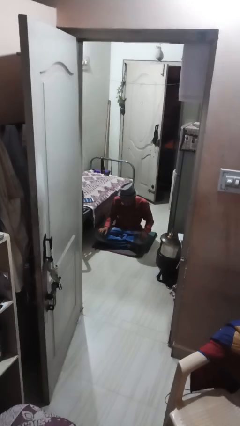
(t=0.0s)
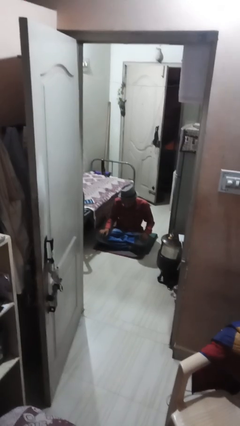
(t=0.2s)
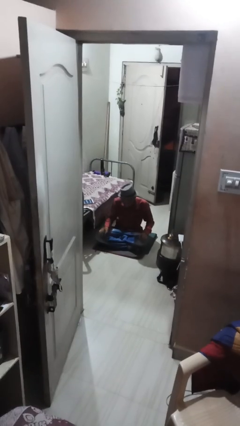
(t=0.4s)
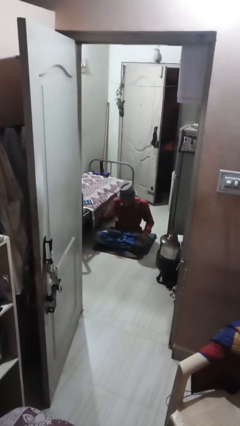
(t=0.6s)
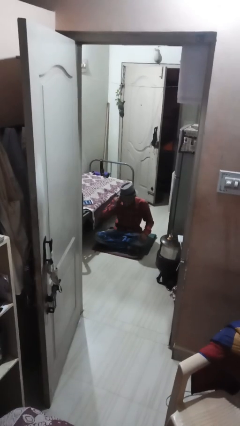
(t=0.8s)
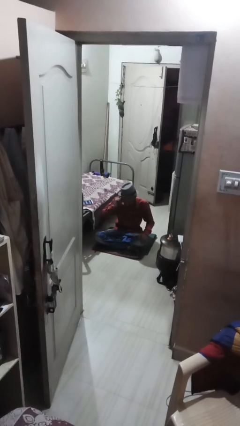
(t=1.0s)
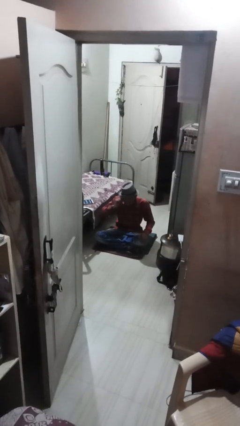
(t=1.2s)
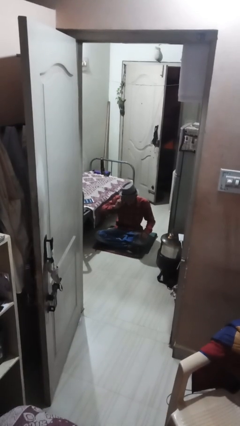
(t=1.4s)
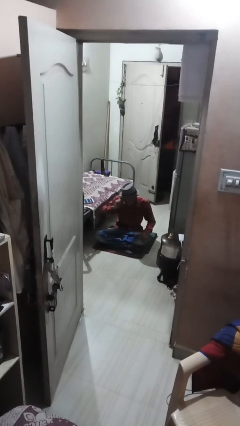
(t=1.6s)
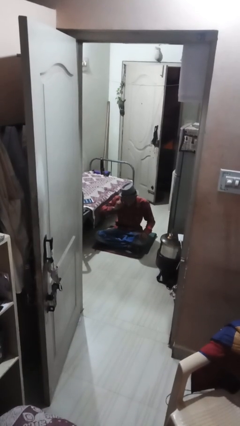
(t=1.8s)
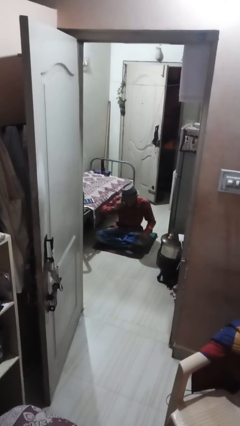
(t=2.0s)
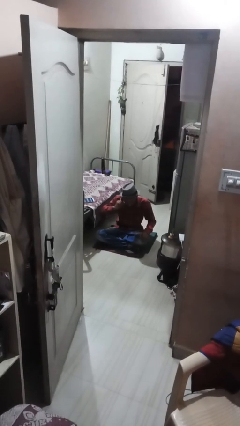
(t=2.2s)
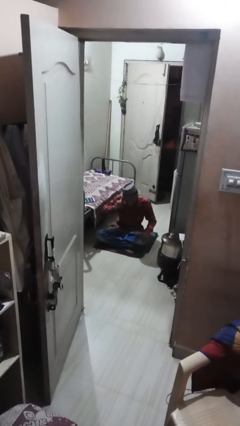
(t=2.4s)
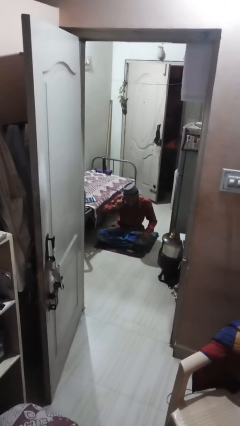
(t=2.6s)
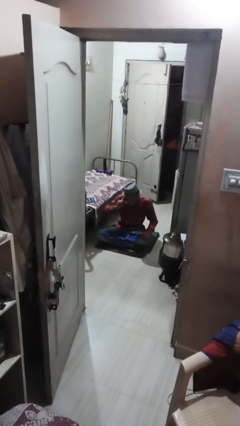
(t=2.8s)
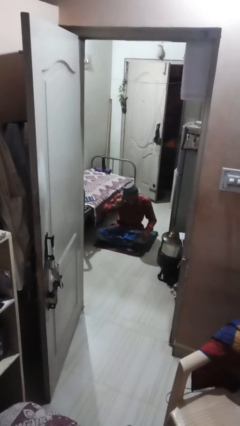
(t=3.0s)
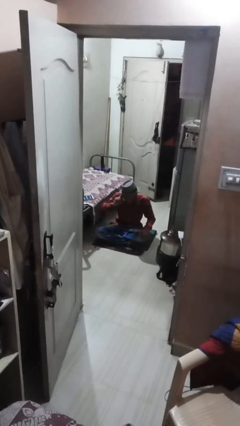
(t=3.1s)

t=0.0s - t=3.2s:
person touches earlobe

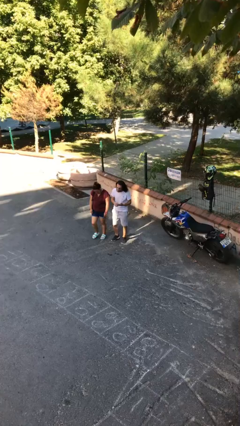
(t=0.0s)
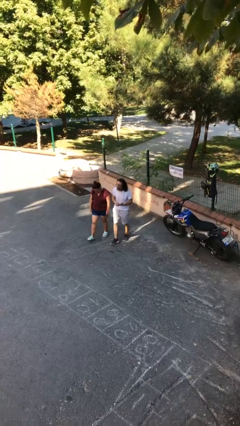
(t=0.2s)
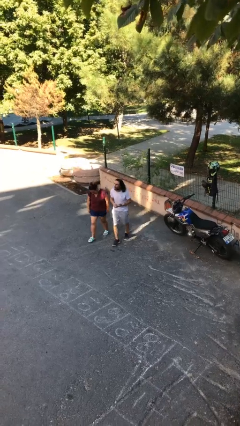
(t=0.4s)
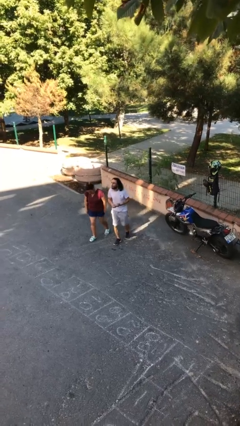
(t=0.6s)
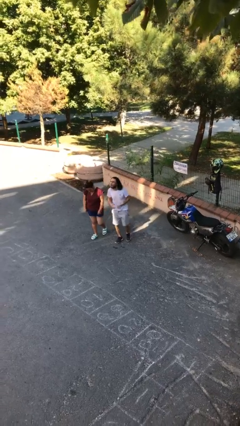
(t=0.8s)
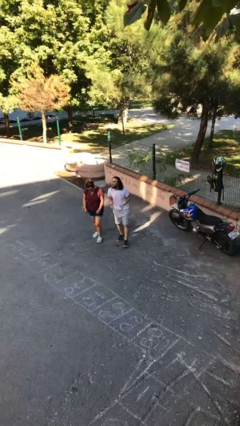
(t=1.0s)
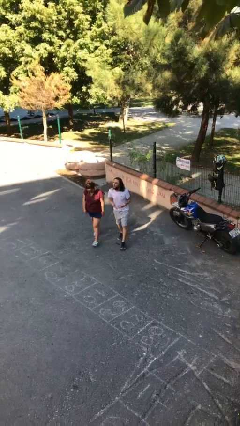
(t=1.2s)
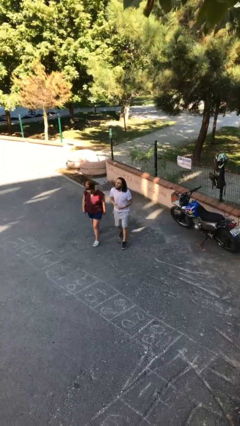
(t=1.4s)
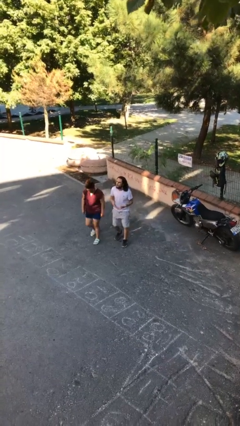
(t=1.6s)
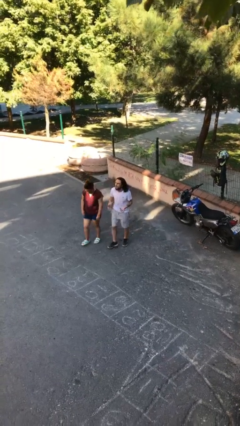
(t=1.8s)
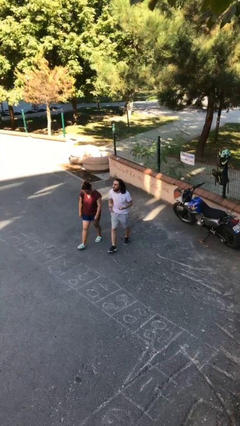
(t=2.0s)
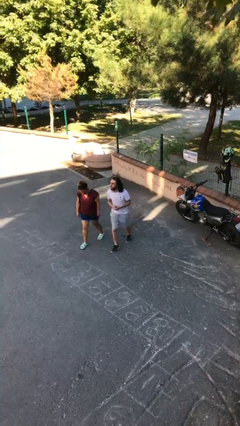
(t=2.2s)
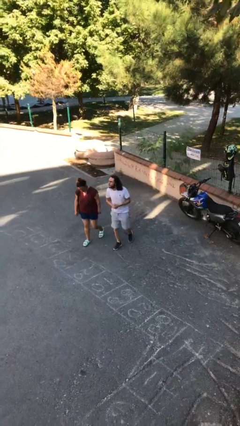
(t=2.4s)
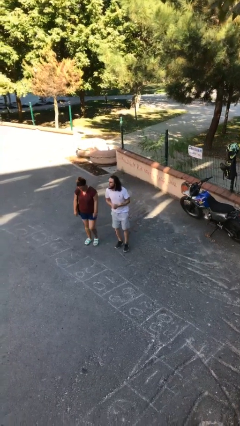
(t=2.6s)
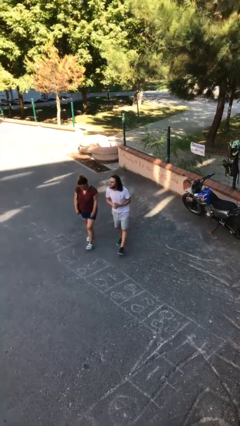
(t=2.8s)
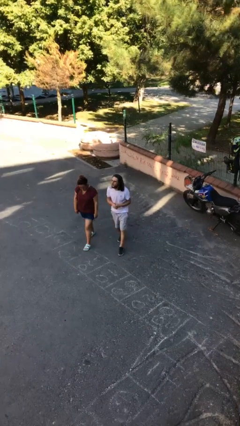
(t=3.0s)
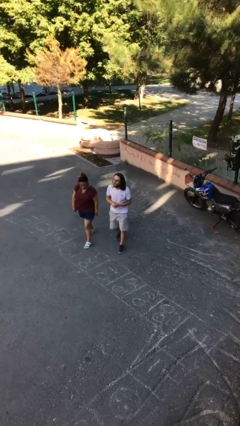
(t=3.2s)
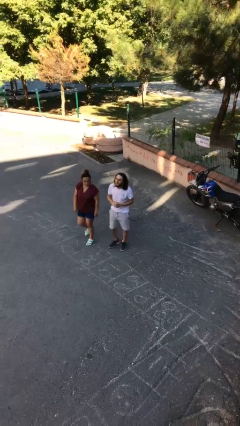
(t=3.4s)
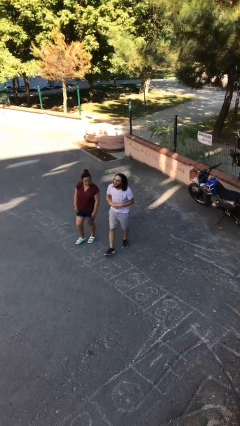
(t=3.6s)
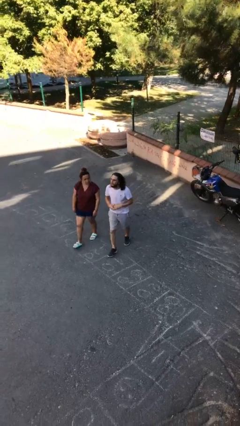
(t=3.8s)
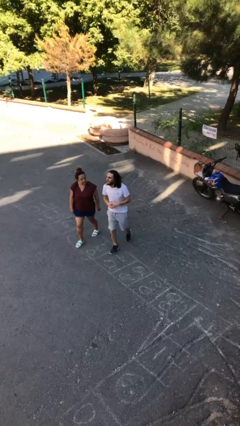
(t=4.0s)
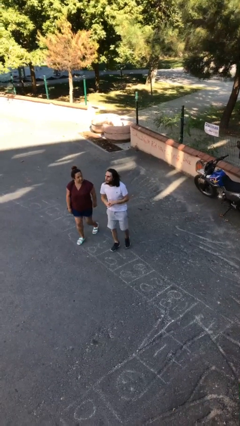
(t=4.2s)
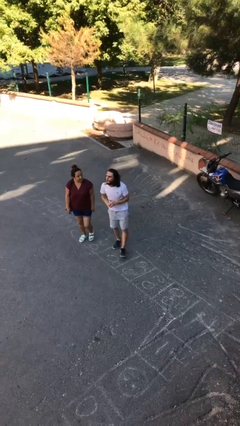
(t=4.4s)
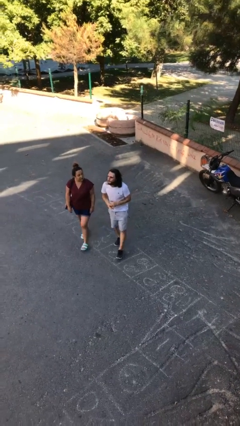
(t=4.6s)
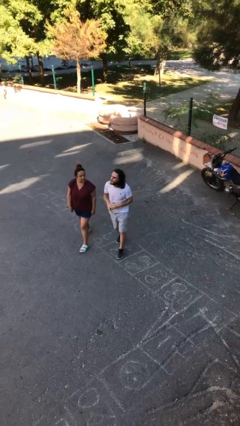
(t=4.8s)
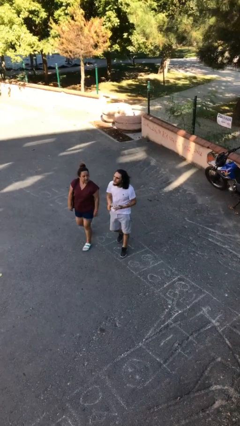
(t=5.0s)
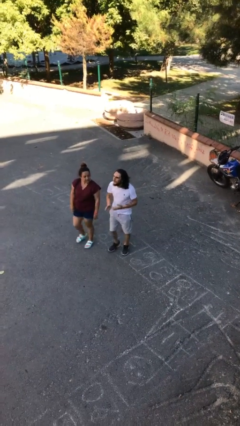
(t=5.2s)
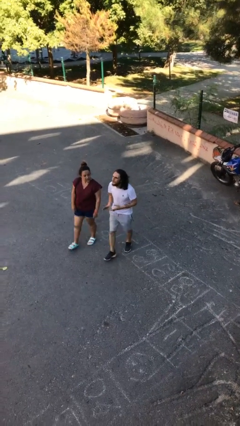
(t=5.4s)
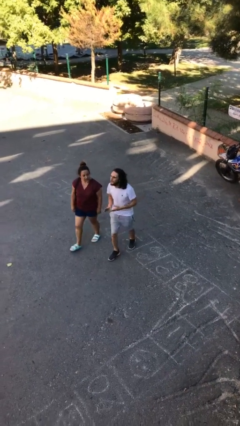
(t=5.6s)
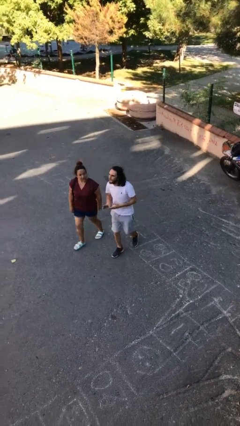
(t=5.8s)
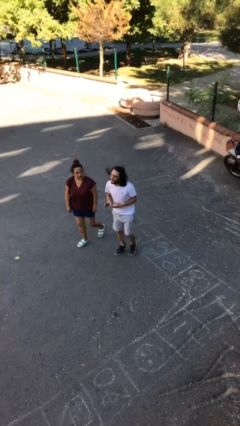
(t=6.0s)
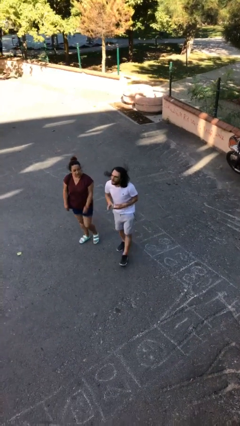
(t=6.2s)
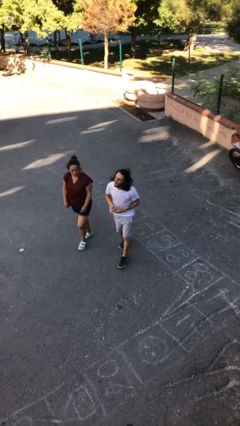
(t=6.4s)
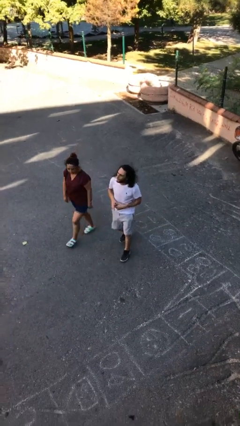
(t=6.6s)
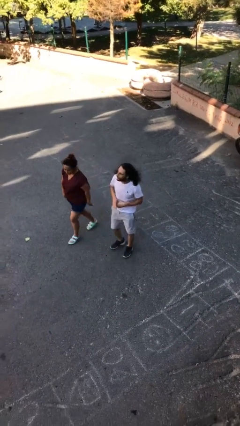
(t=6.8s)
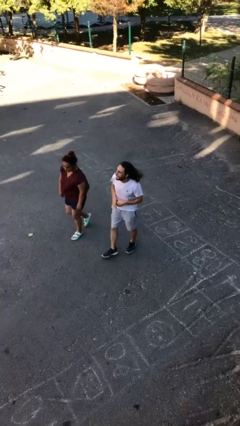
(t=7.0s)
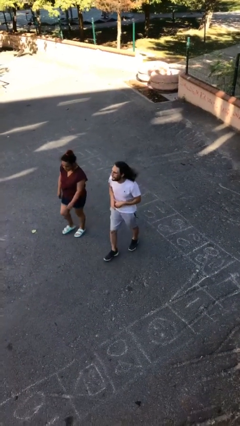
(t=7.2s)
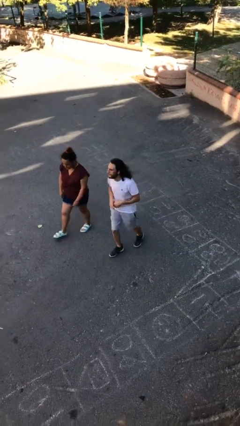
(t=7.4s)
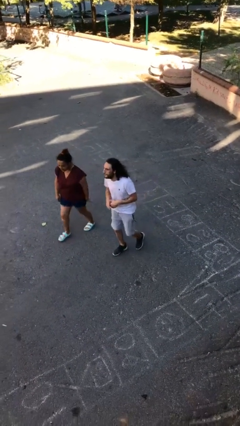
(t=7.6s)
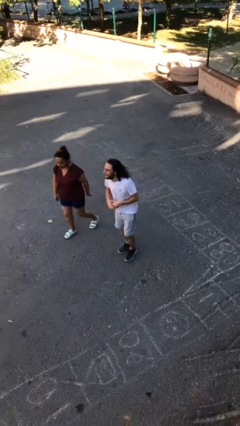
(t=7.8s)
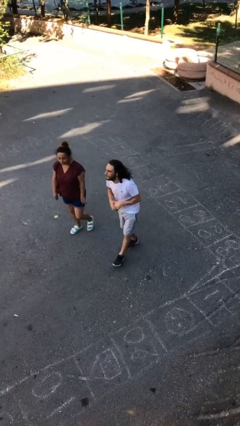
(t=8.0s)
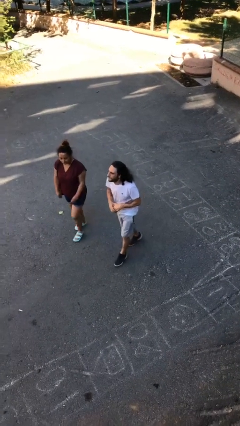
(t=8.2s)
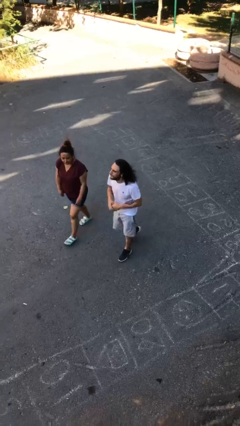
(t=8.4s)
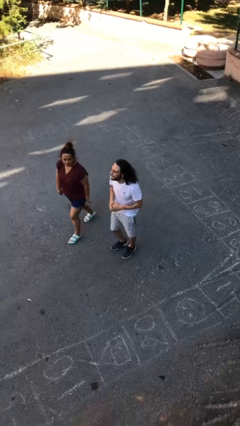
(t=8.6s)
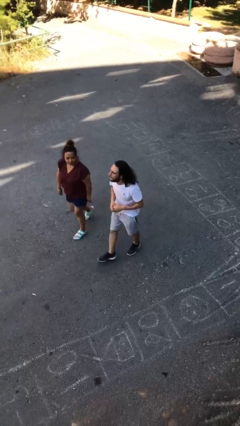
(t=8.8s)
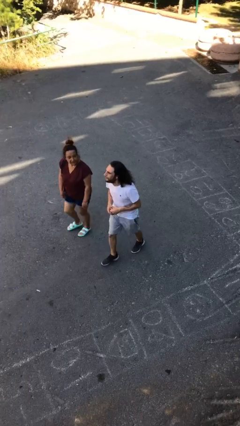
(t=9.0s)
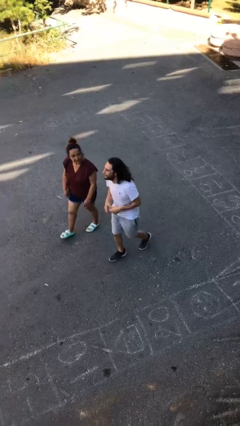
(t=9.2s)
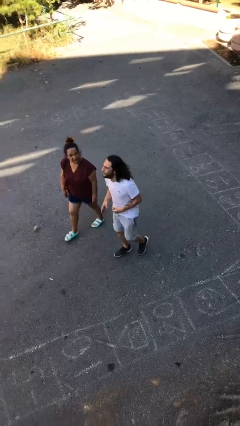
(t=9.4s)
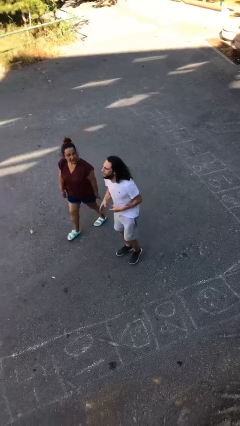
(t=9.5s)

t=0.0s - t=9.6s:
person talks to person

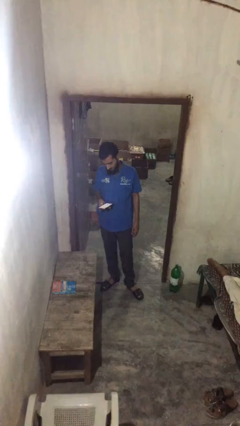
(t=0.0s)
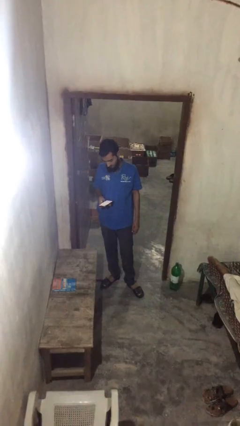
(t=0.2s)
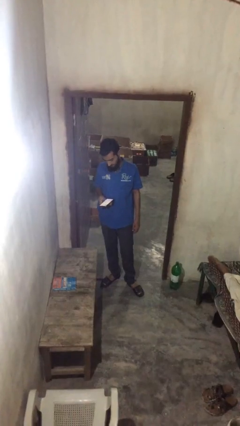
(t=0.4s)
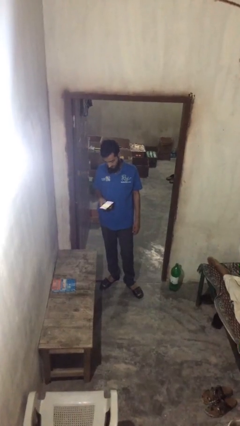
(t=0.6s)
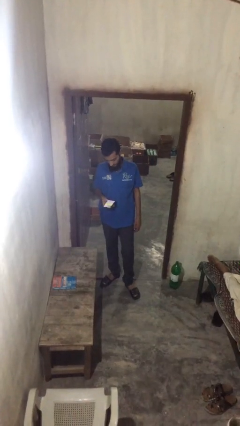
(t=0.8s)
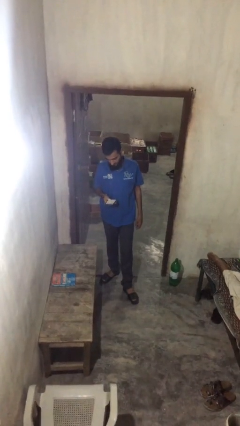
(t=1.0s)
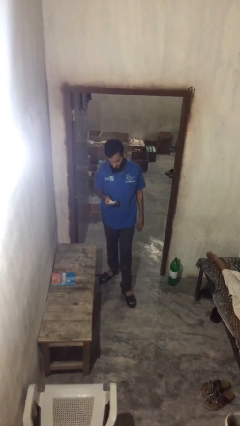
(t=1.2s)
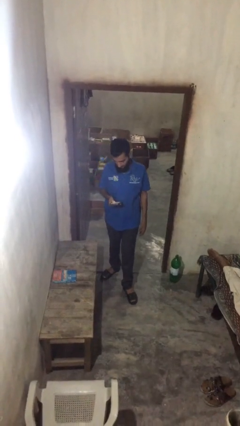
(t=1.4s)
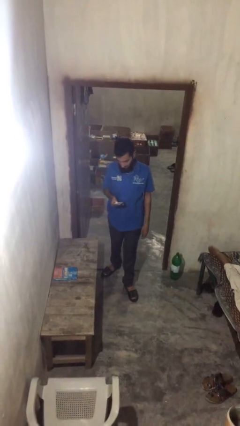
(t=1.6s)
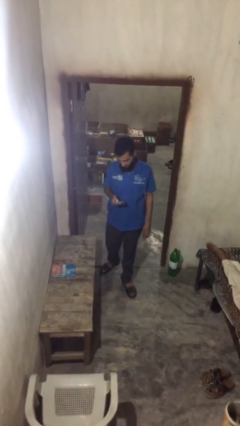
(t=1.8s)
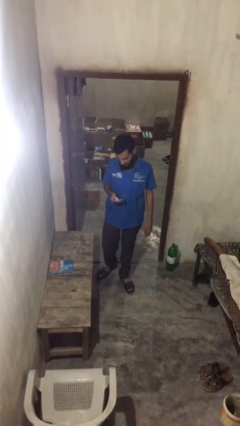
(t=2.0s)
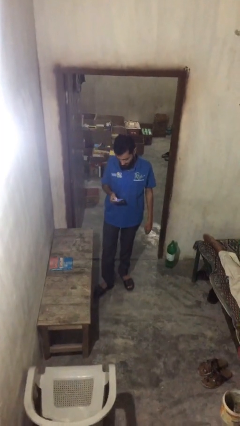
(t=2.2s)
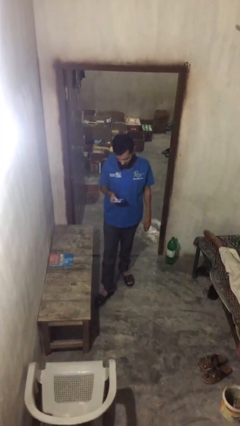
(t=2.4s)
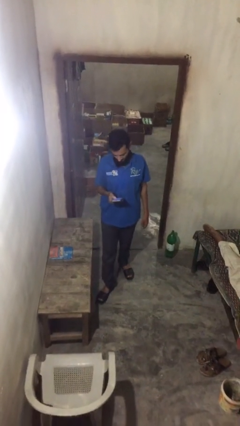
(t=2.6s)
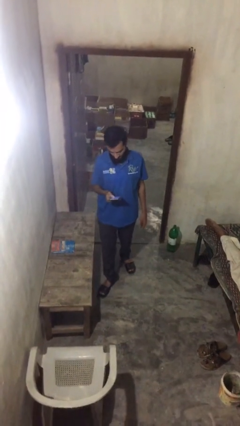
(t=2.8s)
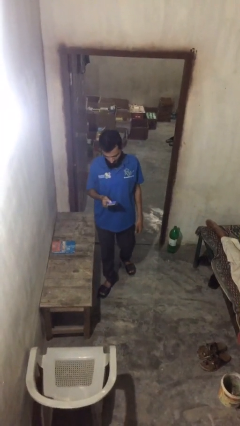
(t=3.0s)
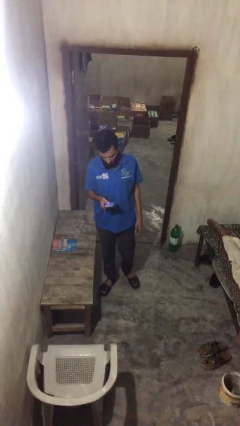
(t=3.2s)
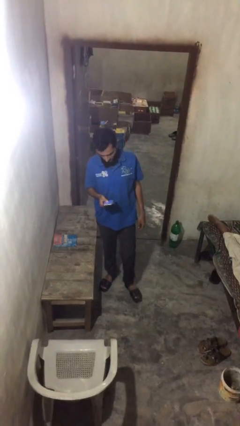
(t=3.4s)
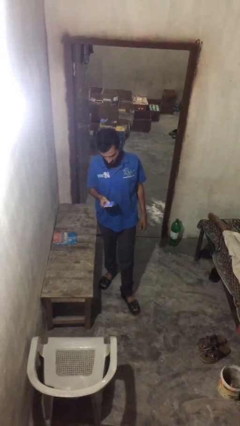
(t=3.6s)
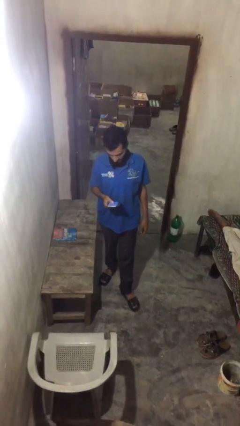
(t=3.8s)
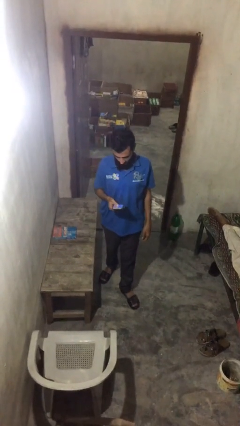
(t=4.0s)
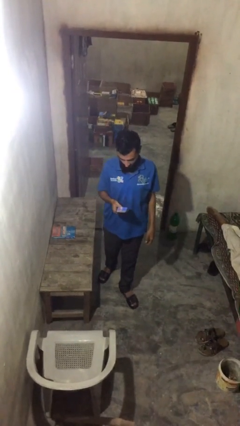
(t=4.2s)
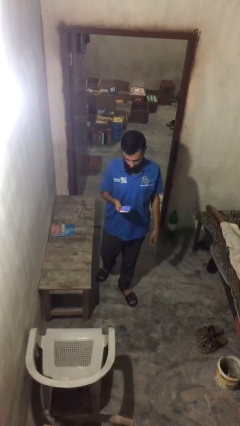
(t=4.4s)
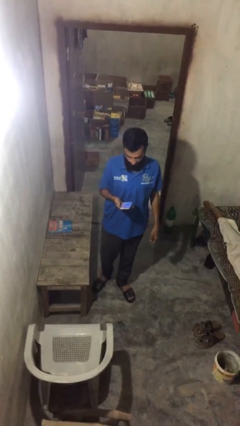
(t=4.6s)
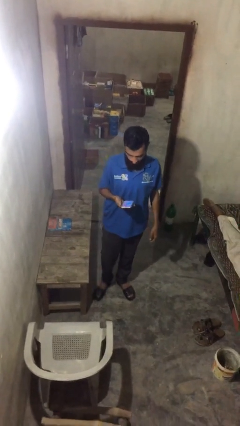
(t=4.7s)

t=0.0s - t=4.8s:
person texts on phone

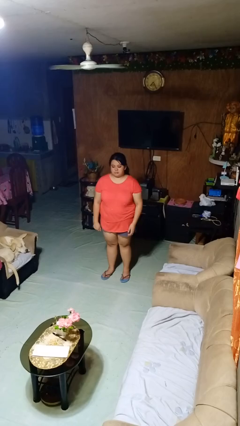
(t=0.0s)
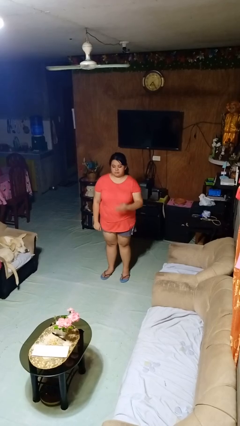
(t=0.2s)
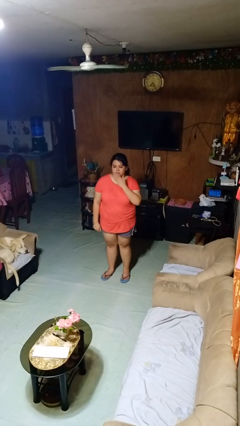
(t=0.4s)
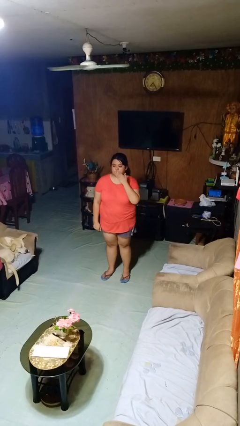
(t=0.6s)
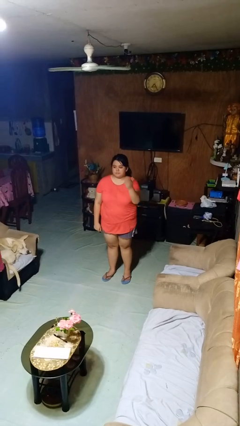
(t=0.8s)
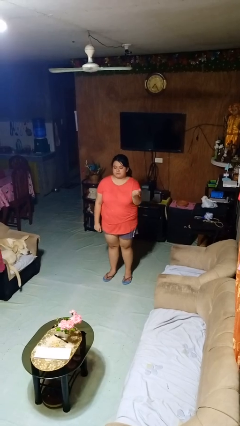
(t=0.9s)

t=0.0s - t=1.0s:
person gestures blow kiss
